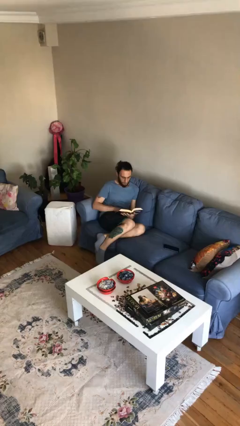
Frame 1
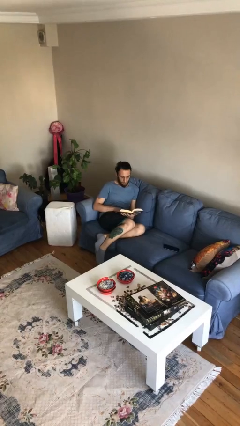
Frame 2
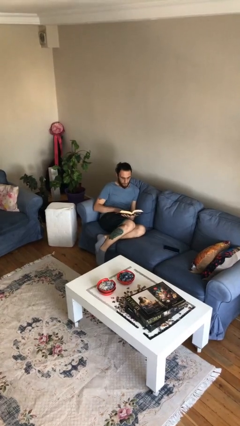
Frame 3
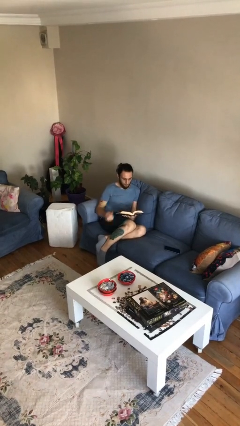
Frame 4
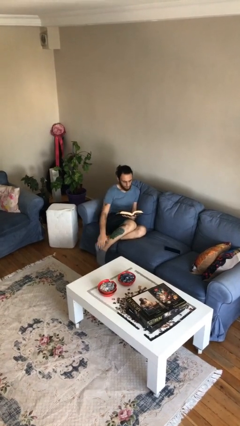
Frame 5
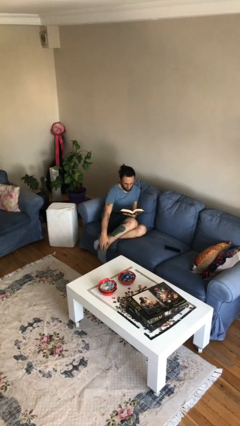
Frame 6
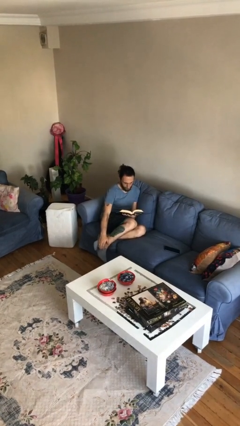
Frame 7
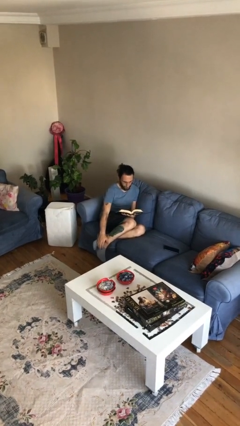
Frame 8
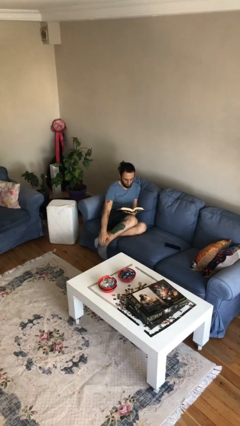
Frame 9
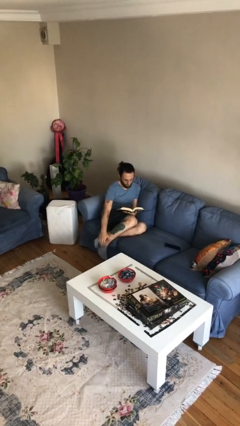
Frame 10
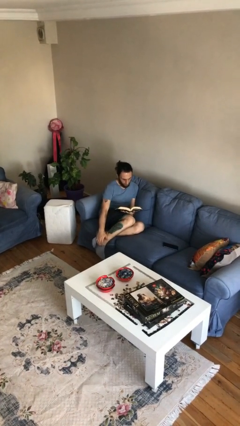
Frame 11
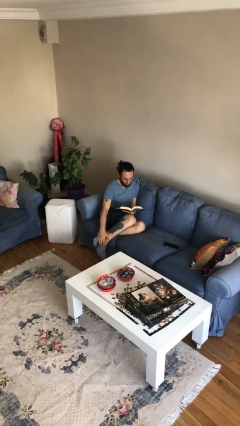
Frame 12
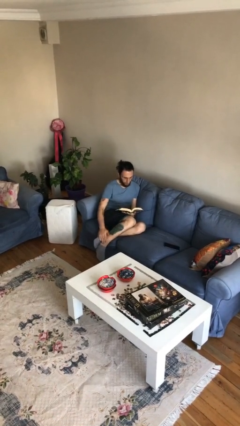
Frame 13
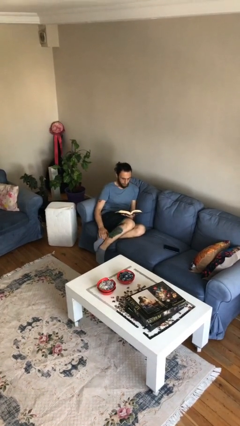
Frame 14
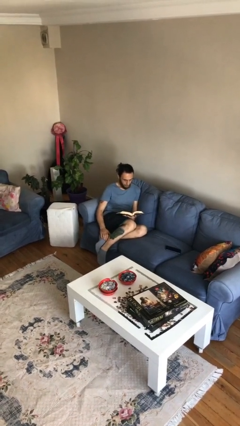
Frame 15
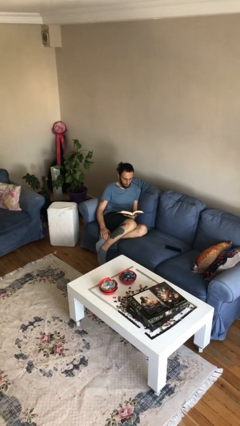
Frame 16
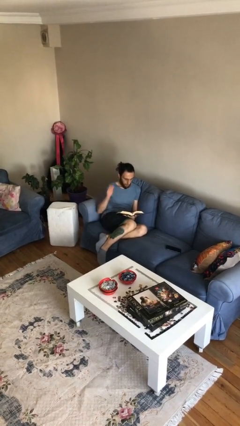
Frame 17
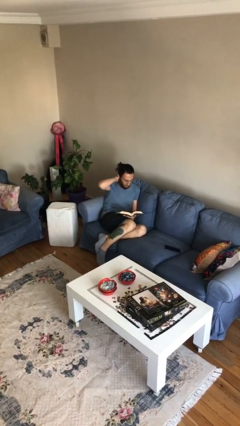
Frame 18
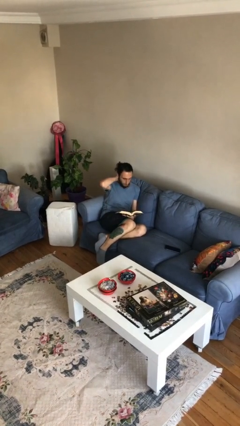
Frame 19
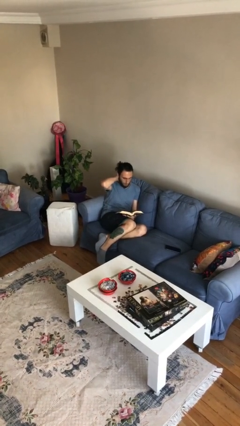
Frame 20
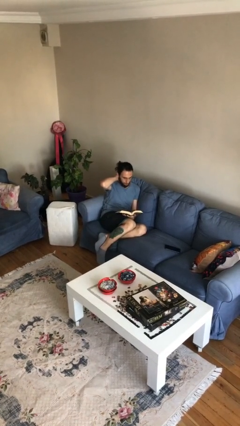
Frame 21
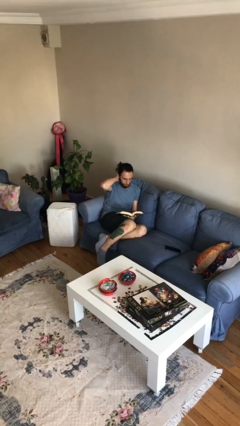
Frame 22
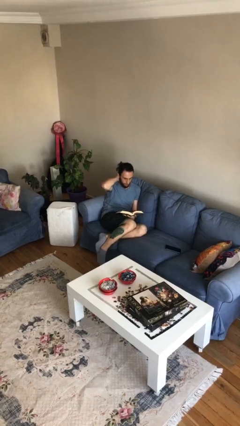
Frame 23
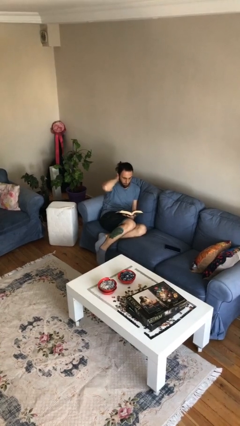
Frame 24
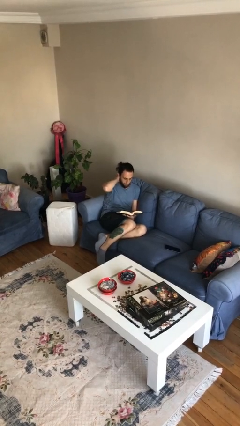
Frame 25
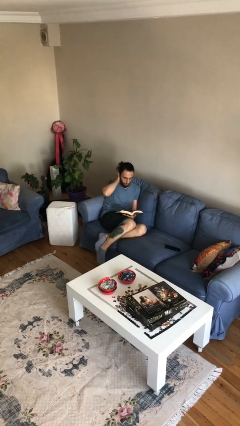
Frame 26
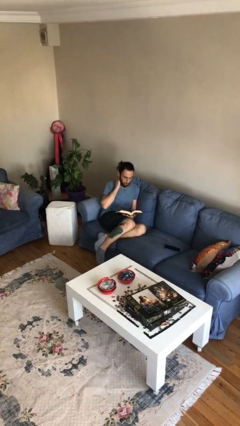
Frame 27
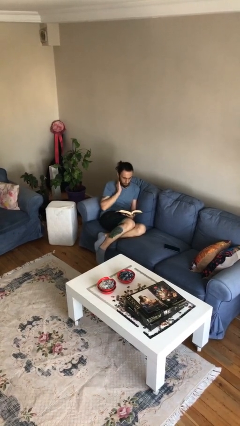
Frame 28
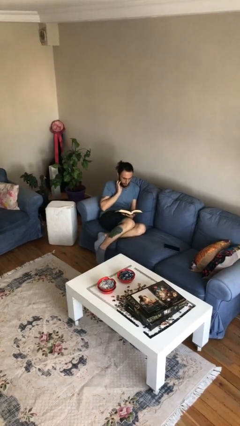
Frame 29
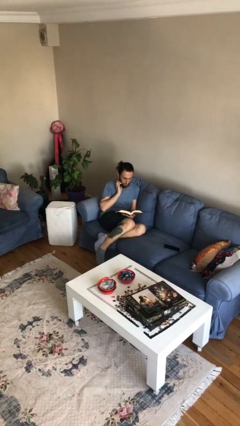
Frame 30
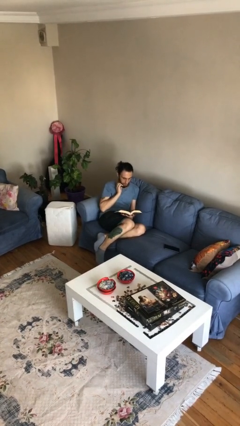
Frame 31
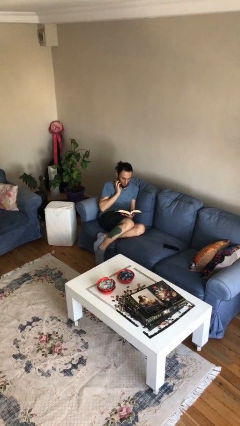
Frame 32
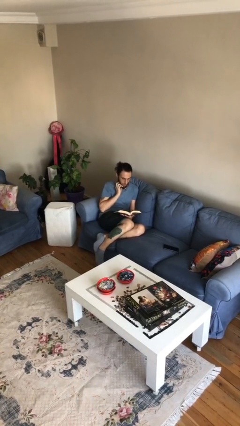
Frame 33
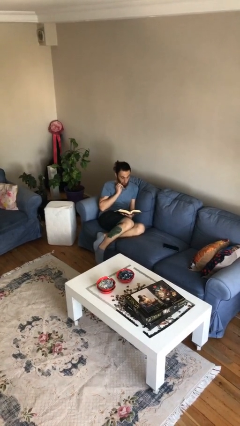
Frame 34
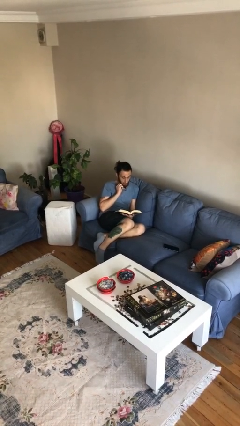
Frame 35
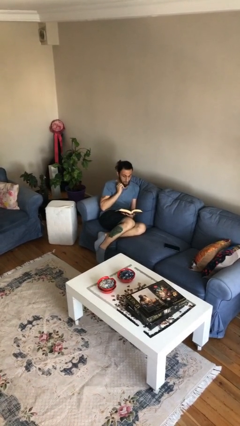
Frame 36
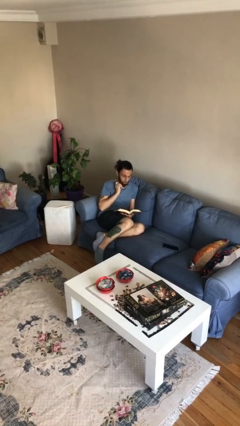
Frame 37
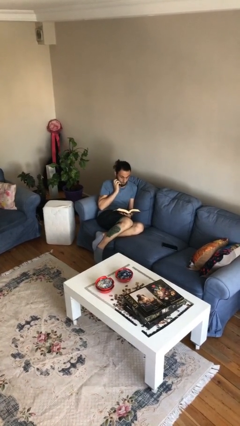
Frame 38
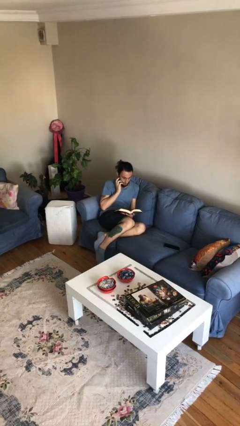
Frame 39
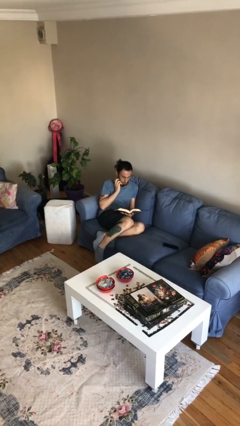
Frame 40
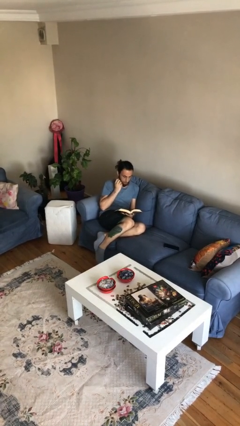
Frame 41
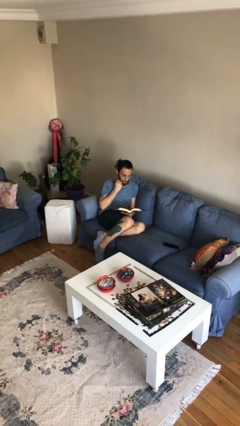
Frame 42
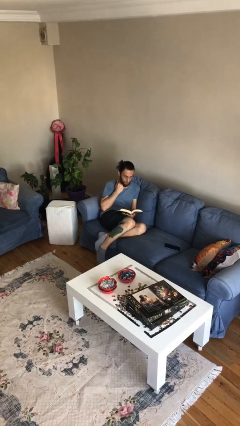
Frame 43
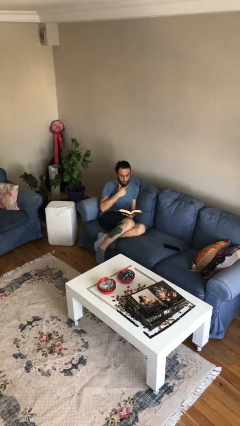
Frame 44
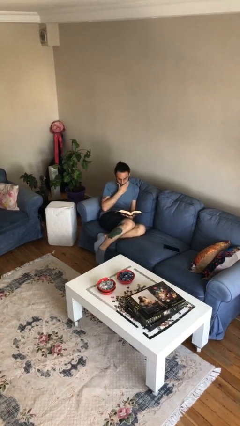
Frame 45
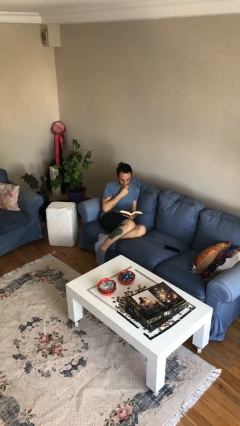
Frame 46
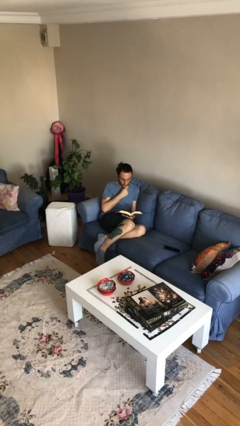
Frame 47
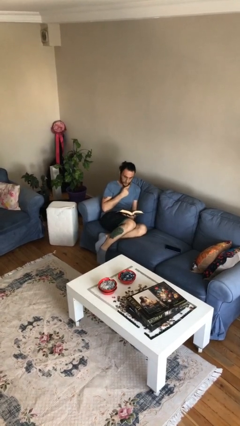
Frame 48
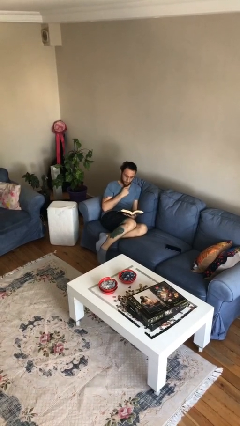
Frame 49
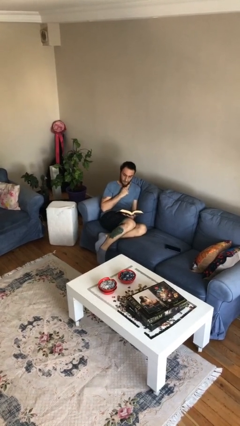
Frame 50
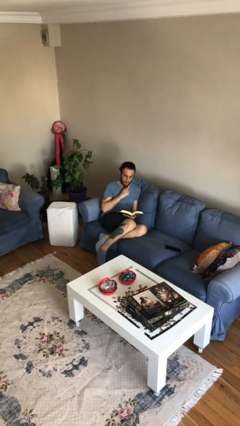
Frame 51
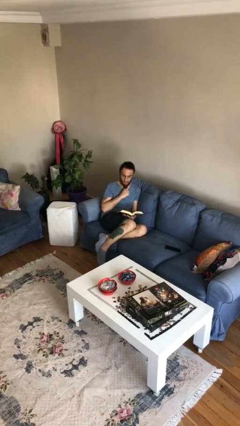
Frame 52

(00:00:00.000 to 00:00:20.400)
person reads document

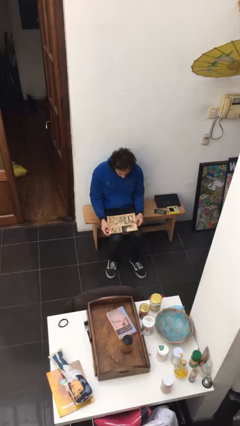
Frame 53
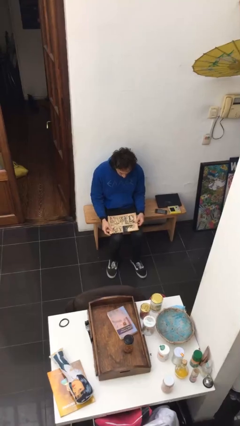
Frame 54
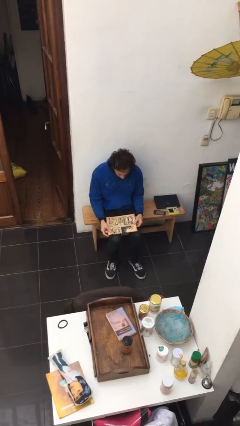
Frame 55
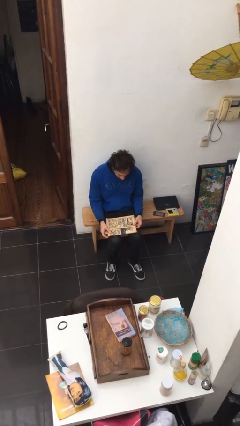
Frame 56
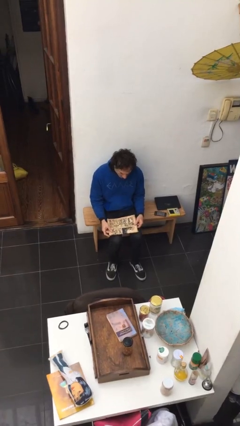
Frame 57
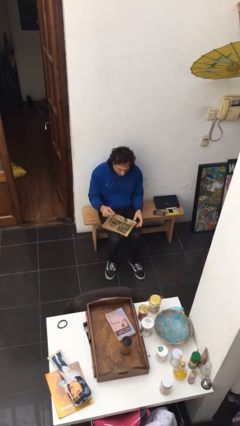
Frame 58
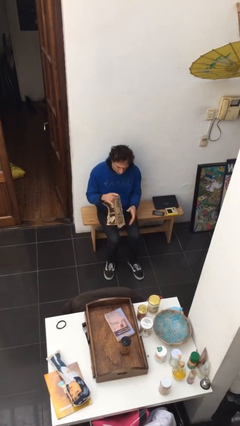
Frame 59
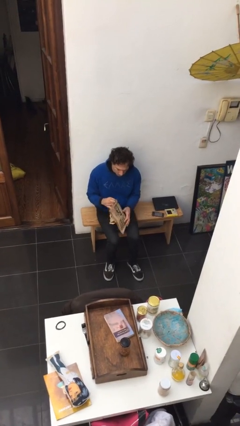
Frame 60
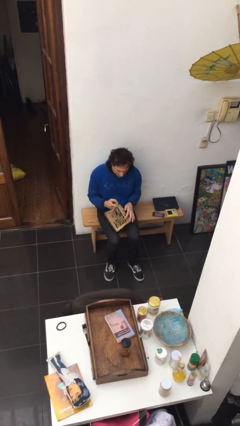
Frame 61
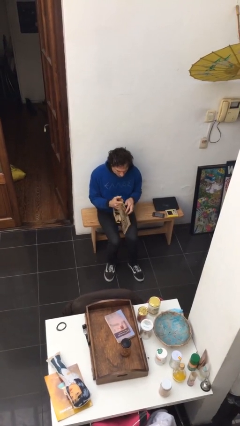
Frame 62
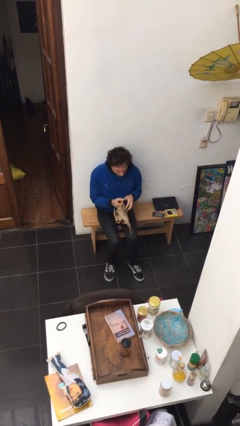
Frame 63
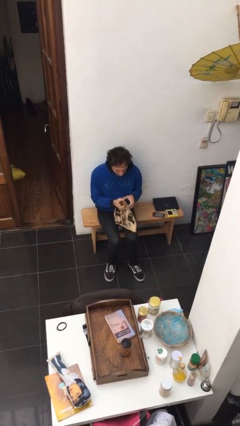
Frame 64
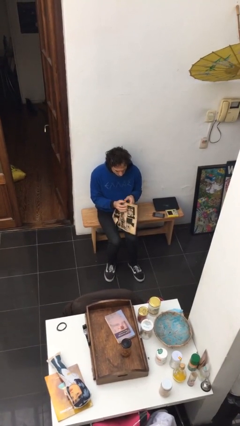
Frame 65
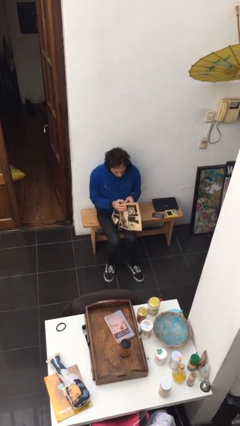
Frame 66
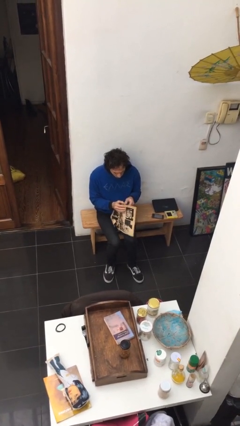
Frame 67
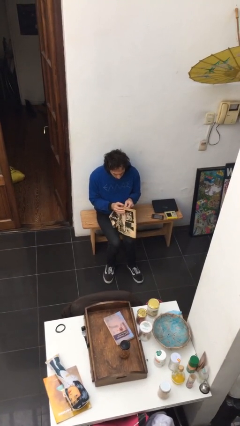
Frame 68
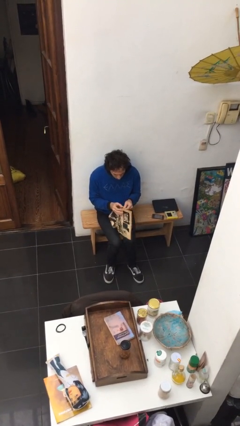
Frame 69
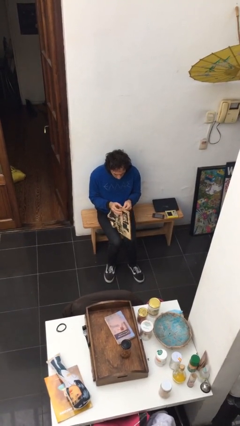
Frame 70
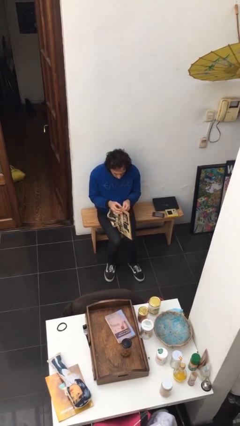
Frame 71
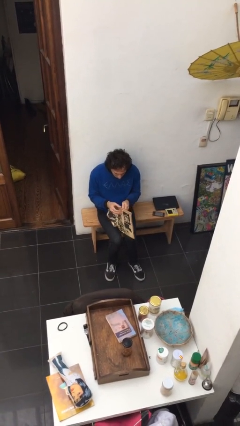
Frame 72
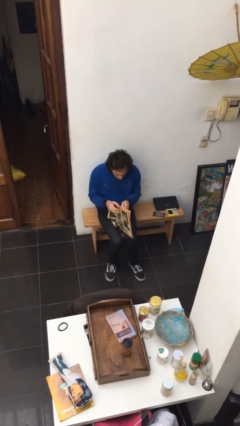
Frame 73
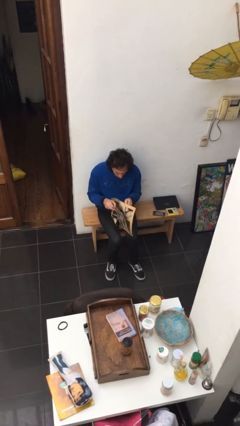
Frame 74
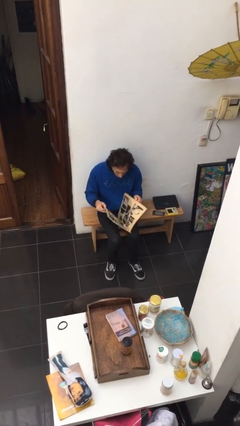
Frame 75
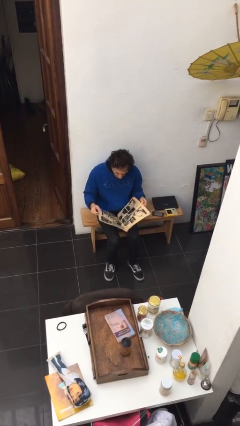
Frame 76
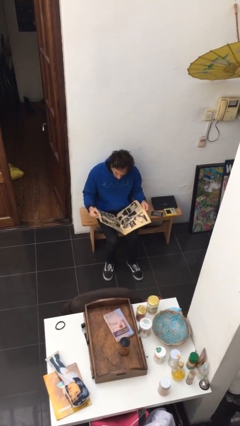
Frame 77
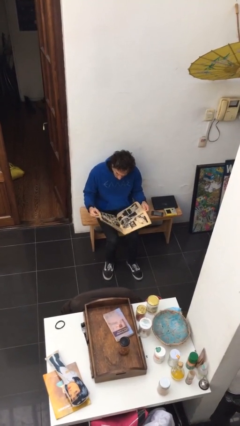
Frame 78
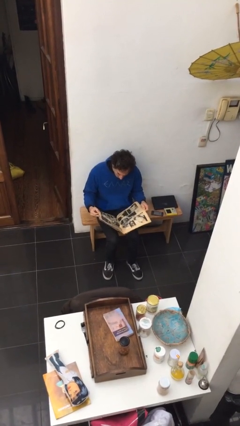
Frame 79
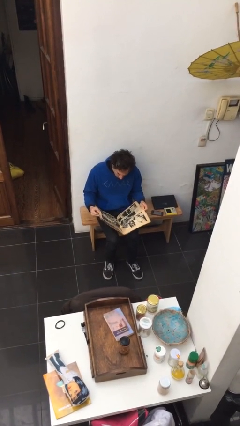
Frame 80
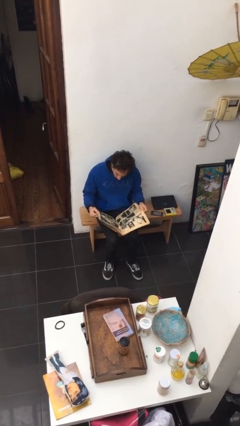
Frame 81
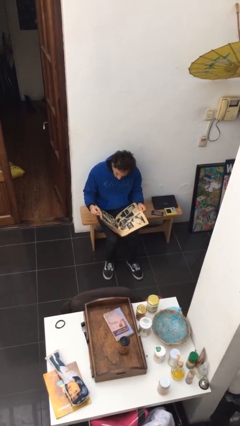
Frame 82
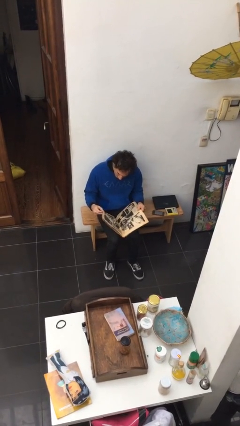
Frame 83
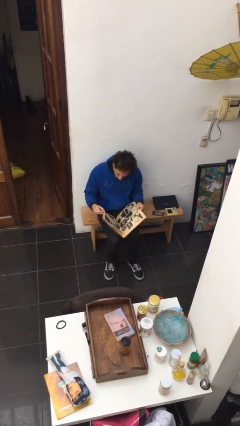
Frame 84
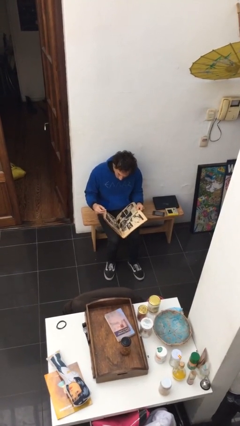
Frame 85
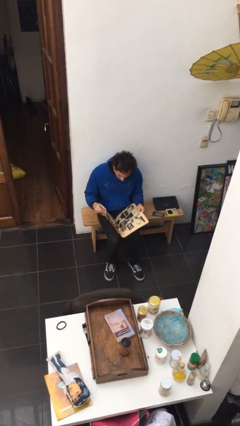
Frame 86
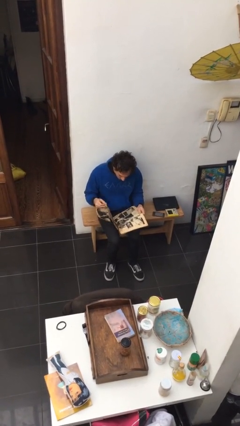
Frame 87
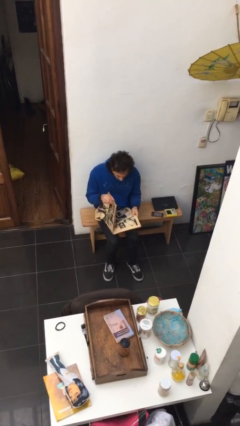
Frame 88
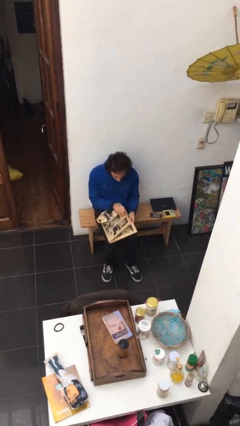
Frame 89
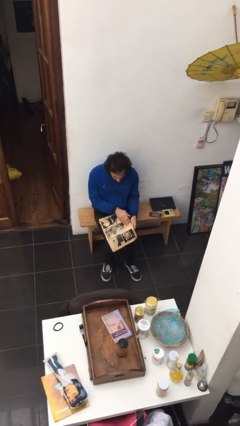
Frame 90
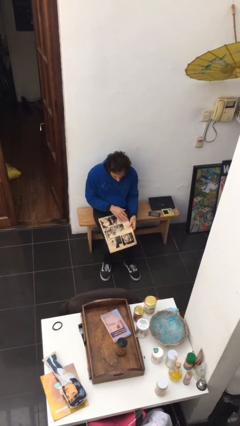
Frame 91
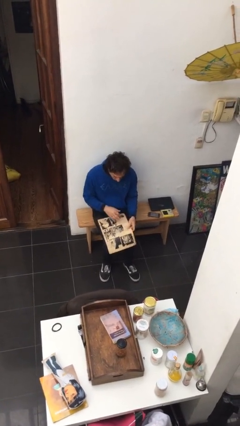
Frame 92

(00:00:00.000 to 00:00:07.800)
person reads newspaper

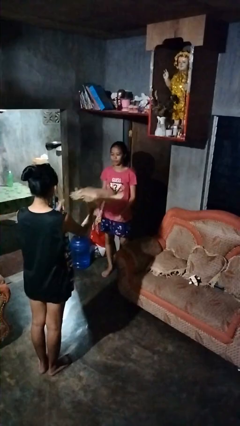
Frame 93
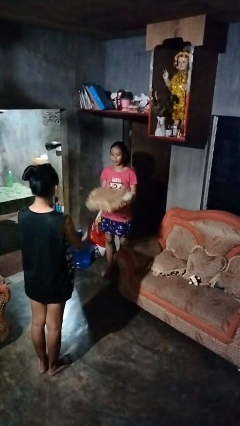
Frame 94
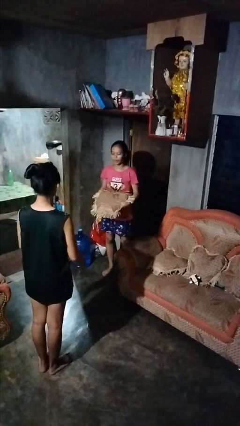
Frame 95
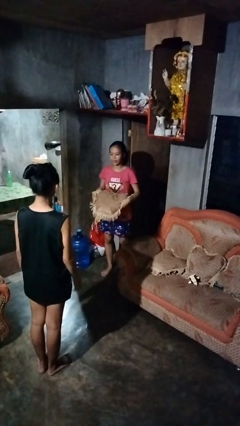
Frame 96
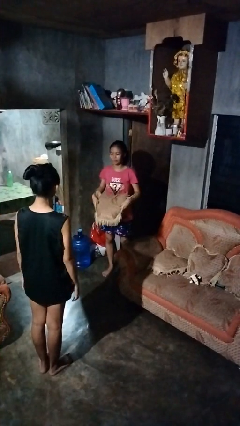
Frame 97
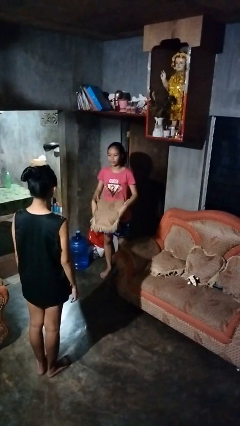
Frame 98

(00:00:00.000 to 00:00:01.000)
person catches object from person
